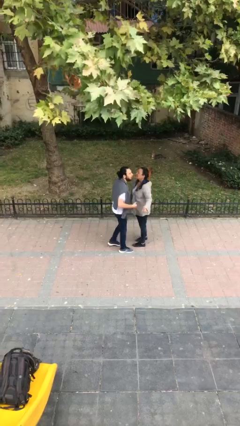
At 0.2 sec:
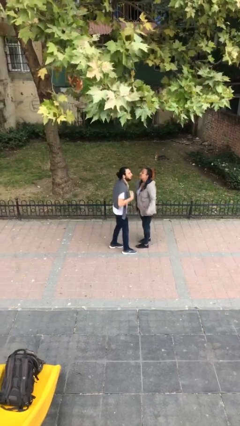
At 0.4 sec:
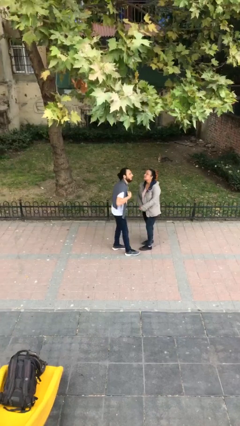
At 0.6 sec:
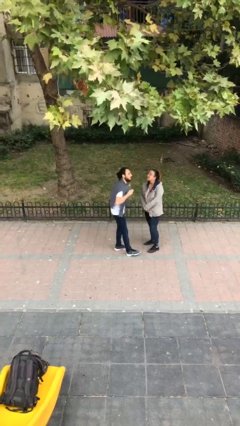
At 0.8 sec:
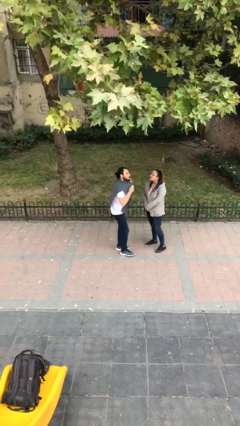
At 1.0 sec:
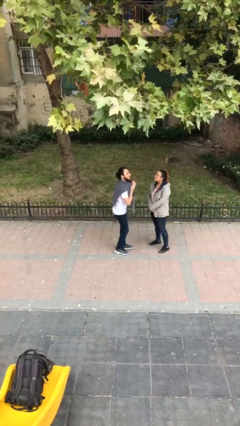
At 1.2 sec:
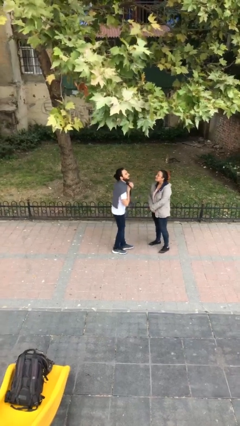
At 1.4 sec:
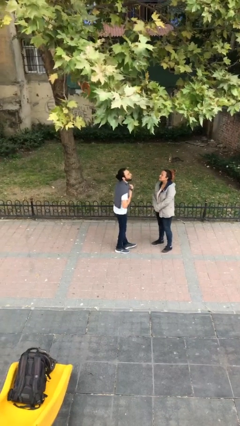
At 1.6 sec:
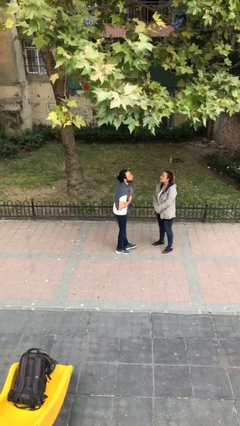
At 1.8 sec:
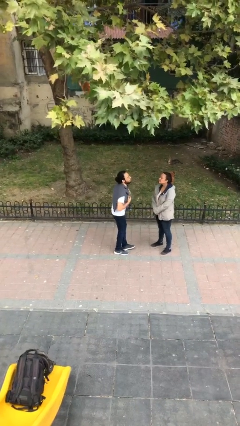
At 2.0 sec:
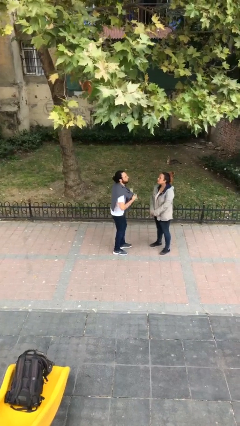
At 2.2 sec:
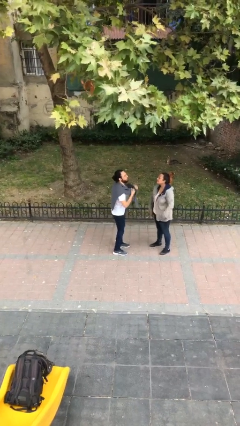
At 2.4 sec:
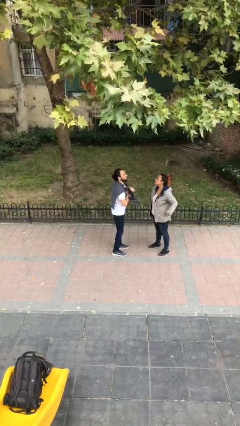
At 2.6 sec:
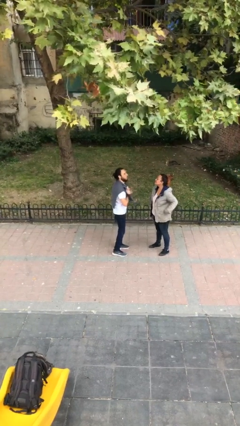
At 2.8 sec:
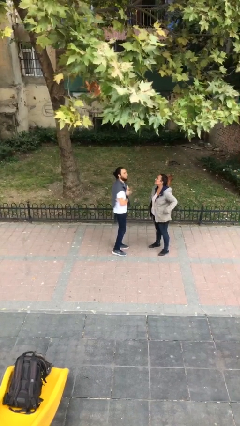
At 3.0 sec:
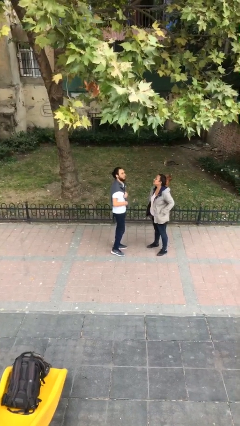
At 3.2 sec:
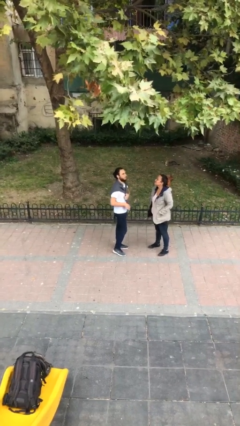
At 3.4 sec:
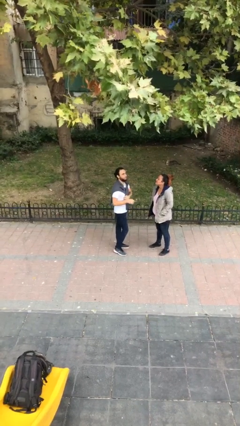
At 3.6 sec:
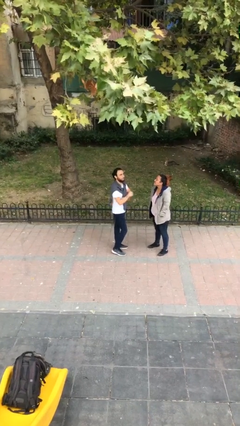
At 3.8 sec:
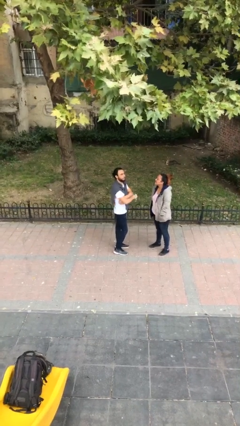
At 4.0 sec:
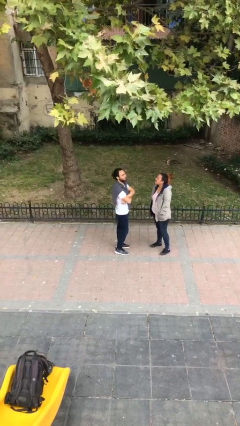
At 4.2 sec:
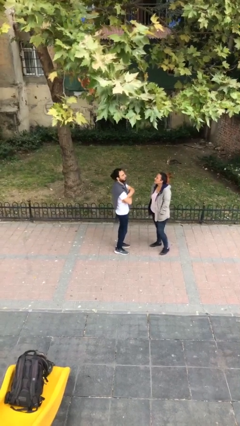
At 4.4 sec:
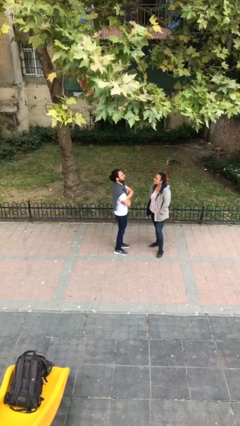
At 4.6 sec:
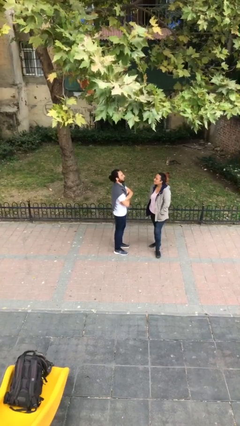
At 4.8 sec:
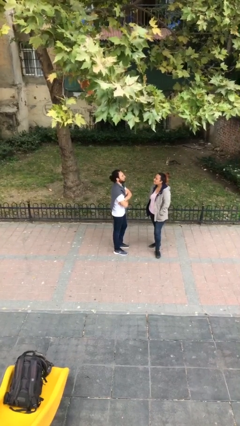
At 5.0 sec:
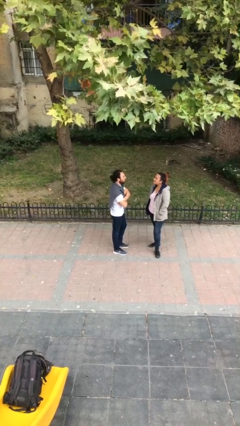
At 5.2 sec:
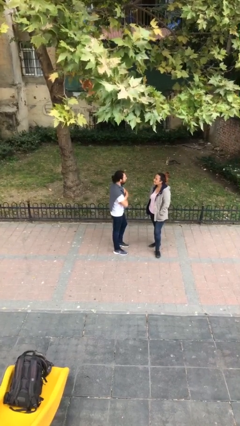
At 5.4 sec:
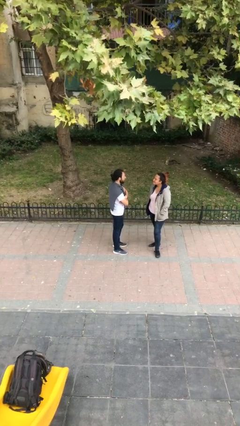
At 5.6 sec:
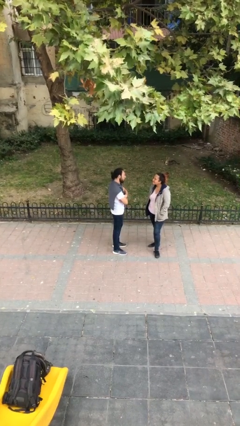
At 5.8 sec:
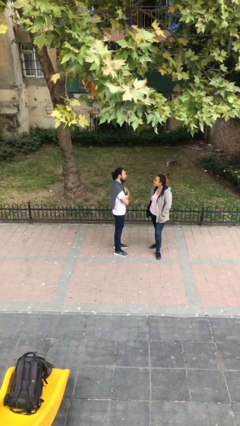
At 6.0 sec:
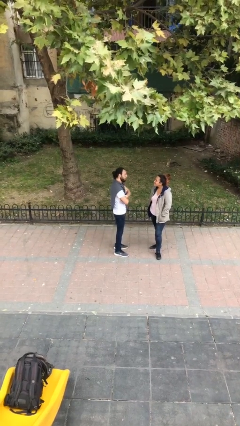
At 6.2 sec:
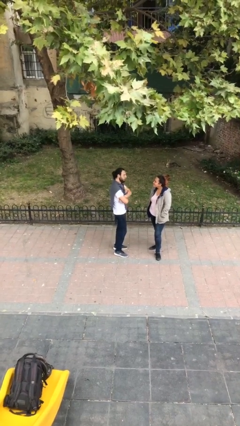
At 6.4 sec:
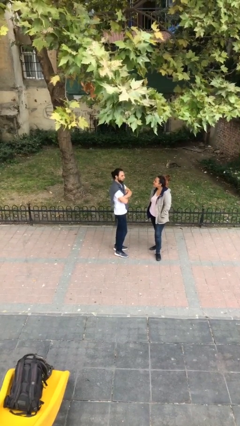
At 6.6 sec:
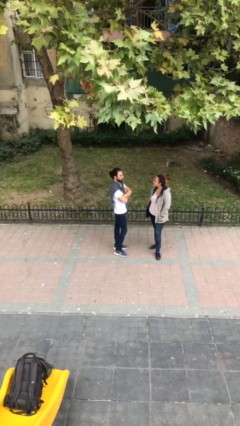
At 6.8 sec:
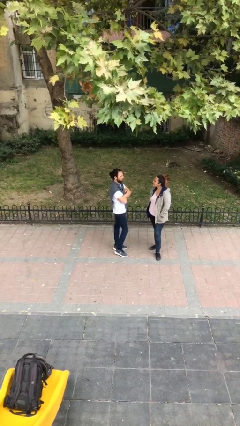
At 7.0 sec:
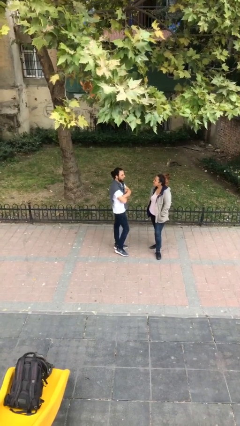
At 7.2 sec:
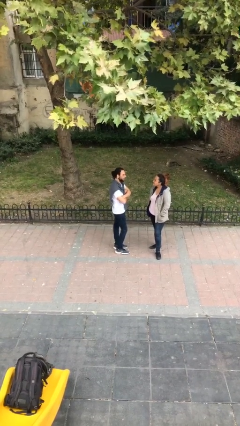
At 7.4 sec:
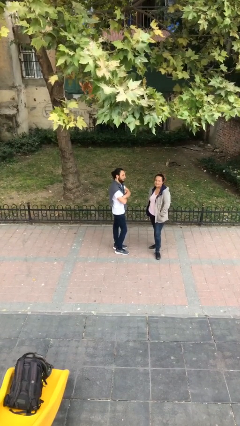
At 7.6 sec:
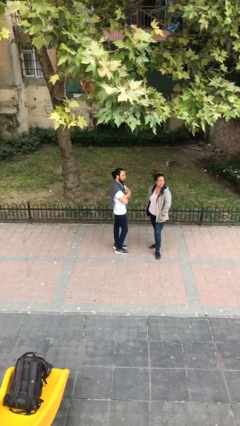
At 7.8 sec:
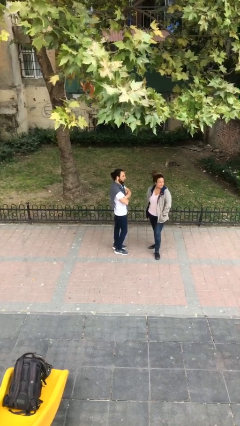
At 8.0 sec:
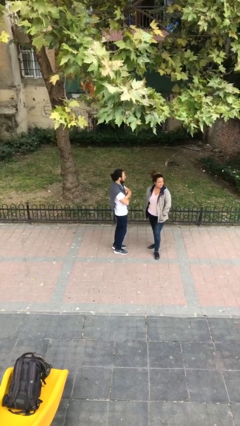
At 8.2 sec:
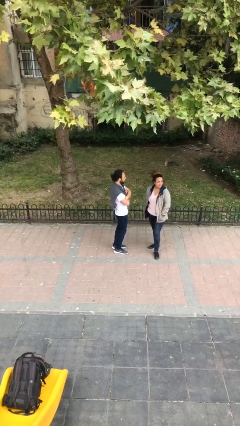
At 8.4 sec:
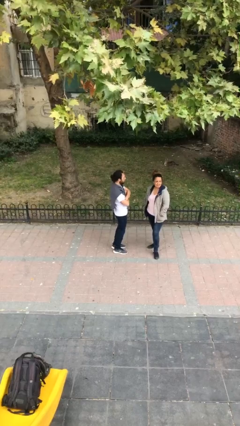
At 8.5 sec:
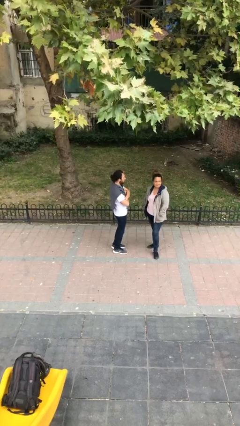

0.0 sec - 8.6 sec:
person talks to person

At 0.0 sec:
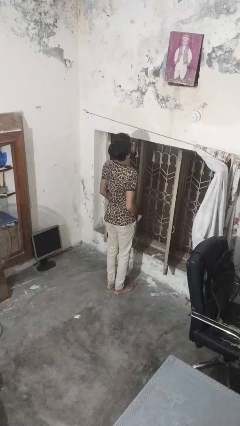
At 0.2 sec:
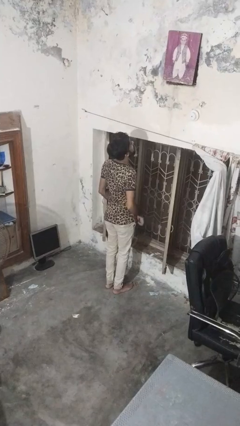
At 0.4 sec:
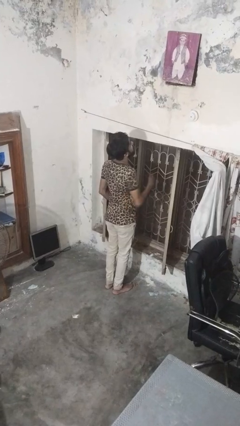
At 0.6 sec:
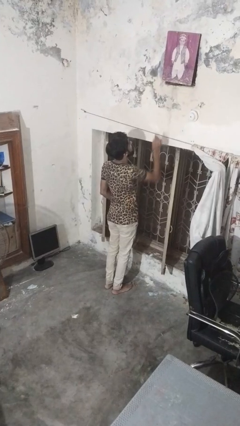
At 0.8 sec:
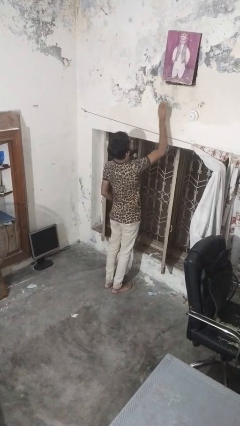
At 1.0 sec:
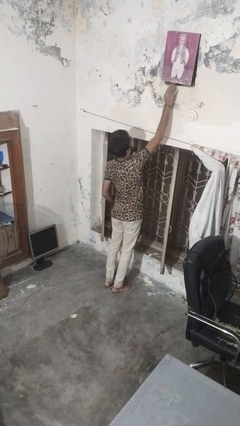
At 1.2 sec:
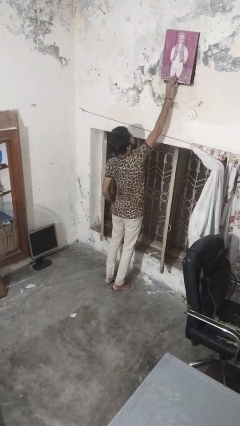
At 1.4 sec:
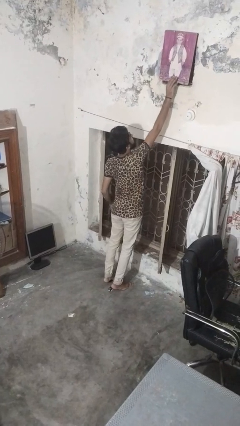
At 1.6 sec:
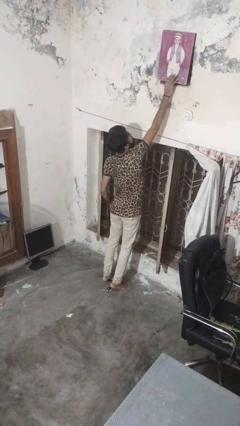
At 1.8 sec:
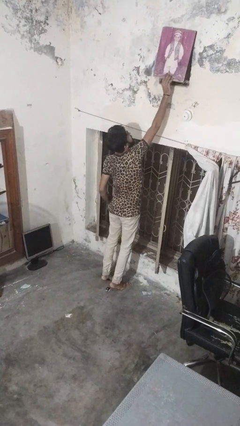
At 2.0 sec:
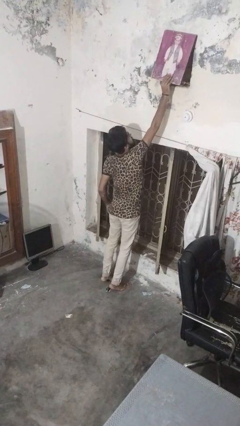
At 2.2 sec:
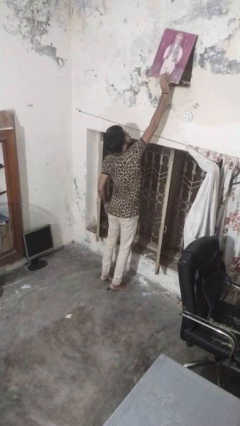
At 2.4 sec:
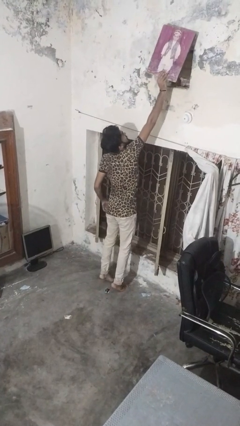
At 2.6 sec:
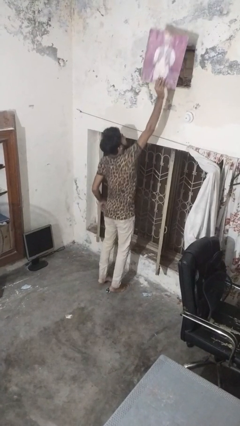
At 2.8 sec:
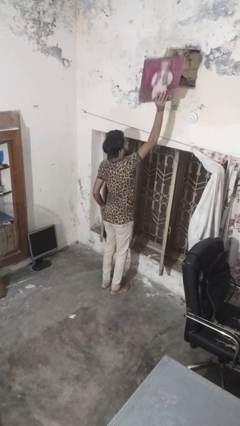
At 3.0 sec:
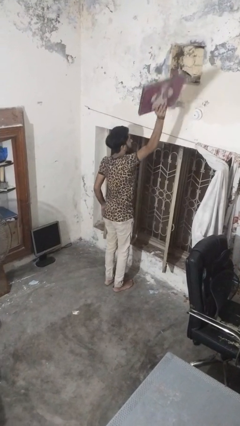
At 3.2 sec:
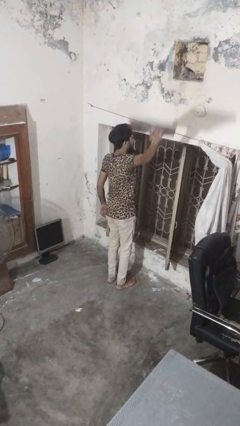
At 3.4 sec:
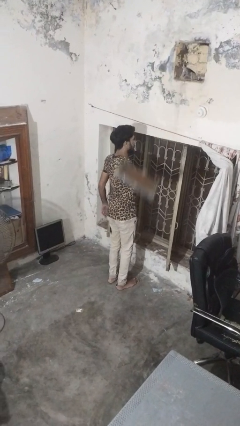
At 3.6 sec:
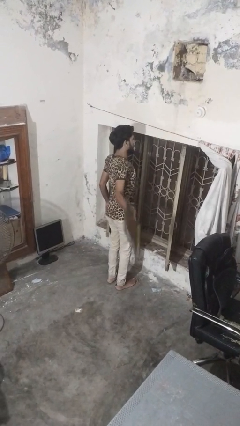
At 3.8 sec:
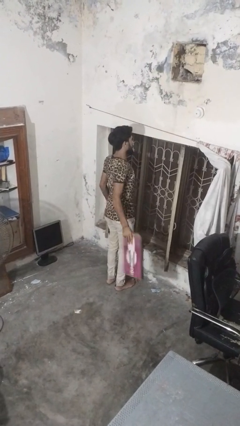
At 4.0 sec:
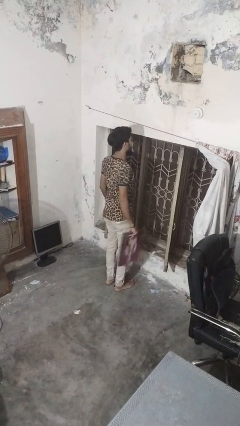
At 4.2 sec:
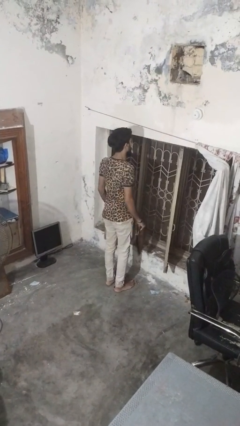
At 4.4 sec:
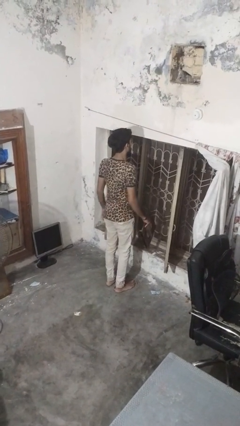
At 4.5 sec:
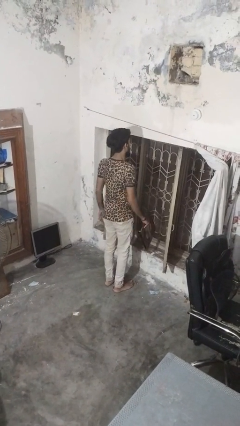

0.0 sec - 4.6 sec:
person takes down picture frame

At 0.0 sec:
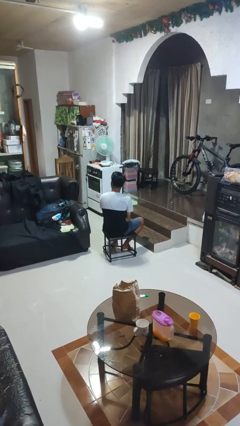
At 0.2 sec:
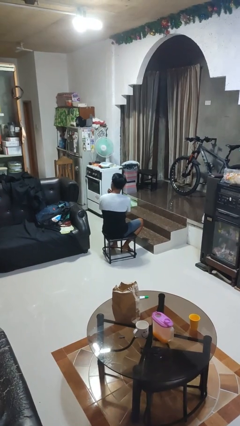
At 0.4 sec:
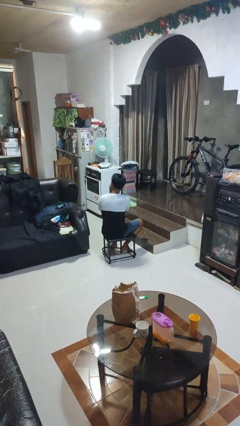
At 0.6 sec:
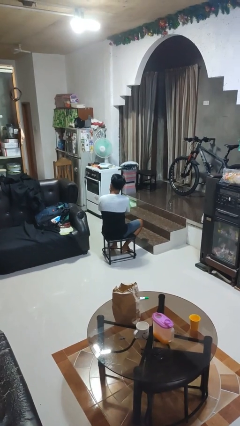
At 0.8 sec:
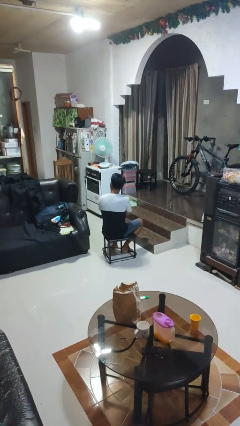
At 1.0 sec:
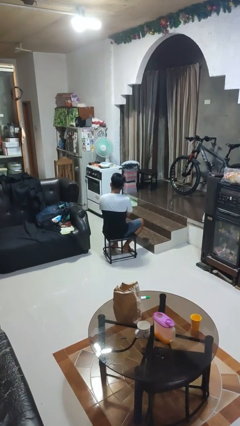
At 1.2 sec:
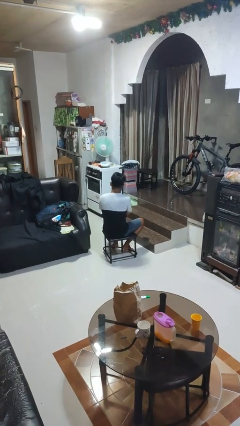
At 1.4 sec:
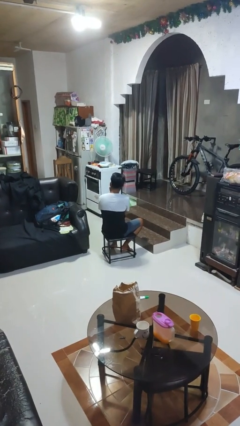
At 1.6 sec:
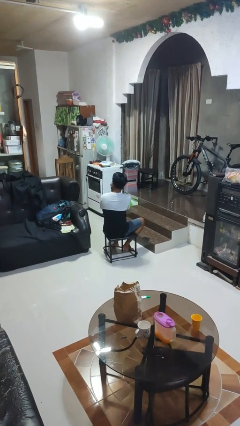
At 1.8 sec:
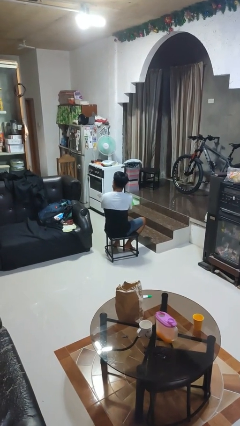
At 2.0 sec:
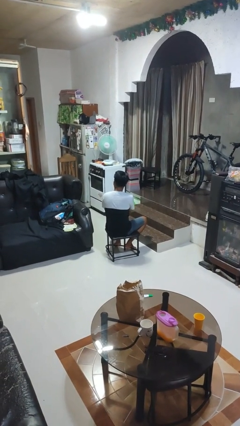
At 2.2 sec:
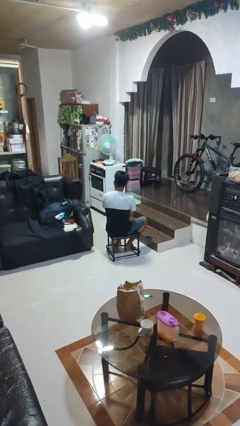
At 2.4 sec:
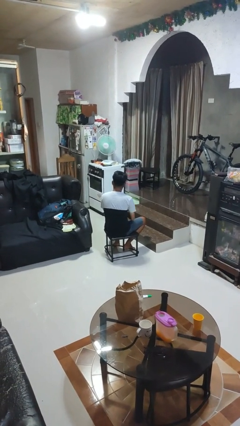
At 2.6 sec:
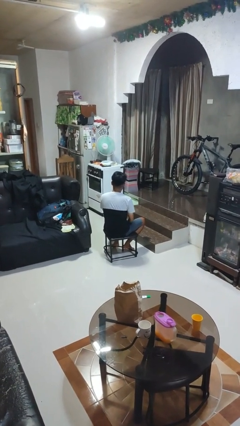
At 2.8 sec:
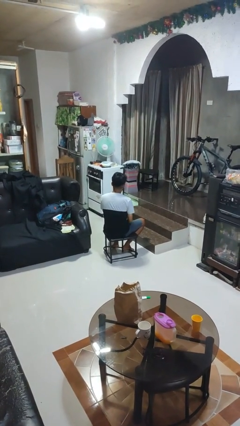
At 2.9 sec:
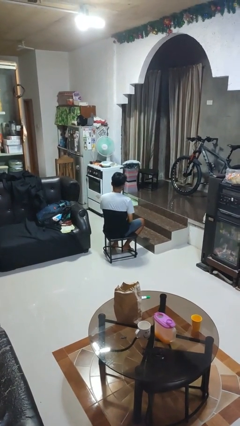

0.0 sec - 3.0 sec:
person strokes chin

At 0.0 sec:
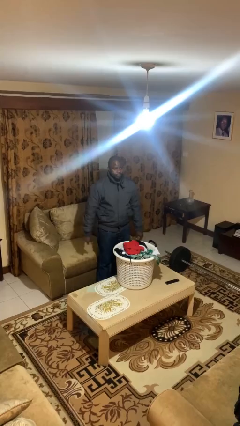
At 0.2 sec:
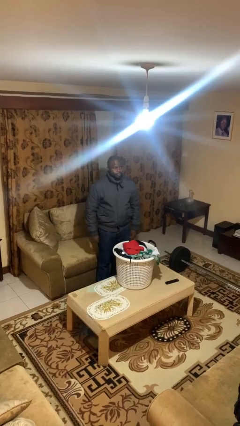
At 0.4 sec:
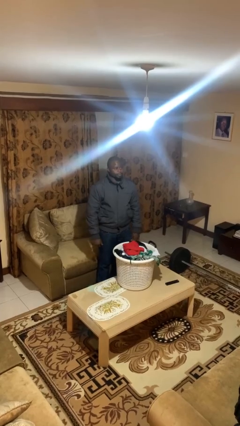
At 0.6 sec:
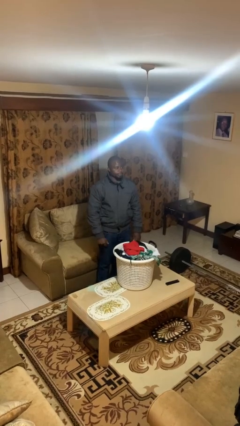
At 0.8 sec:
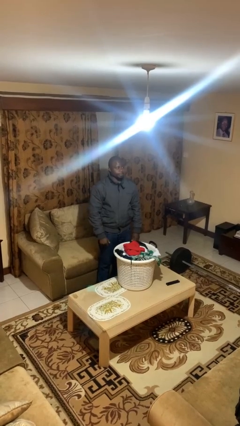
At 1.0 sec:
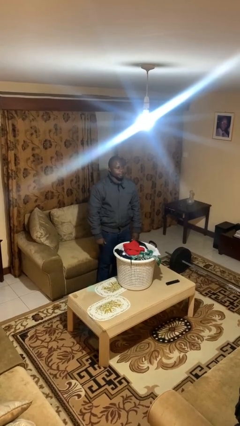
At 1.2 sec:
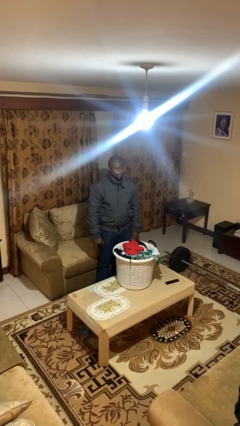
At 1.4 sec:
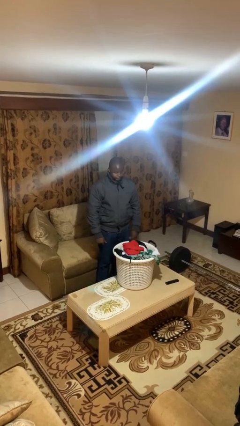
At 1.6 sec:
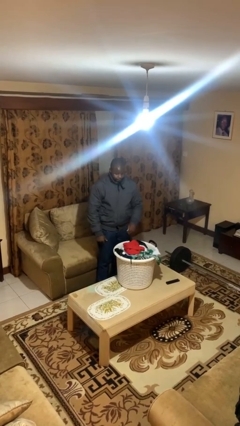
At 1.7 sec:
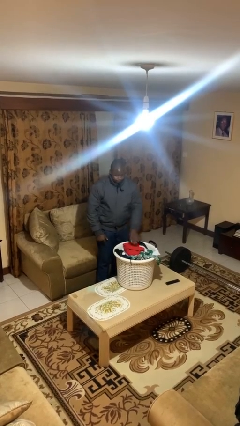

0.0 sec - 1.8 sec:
person folds shirt
